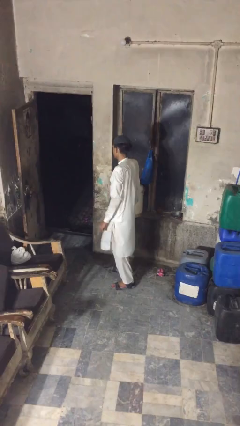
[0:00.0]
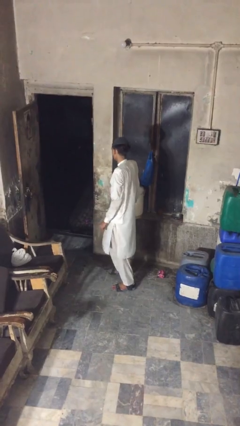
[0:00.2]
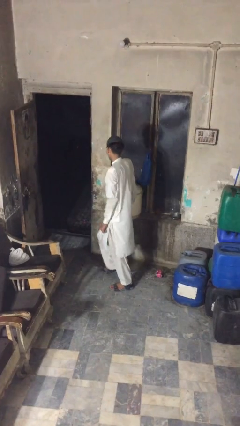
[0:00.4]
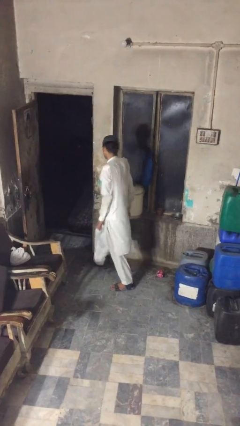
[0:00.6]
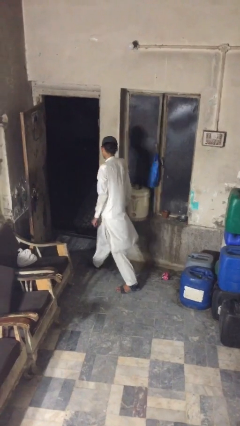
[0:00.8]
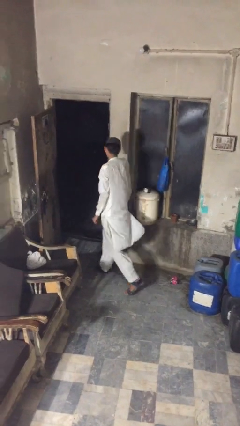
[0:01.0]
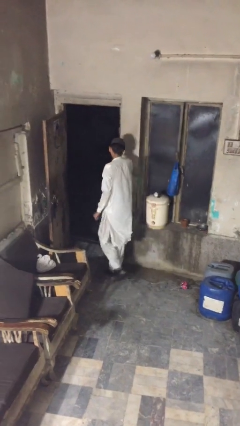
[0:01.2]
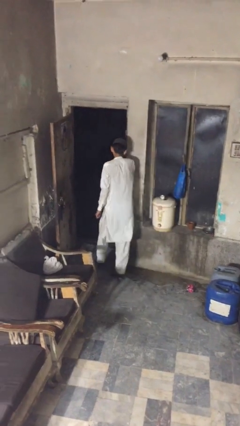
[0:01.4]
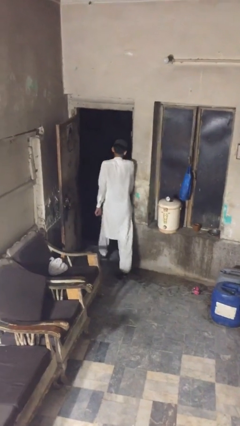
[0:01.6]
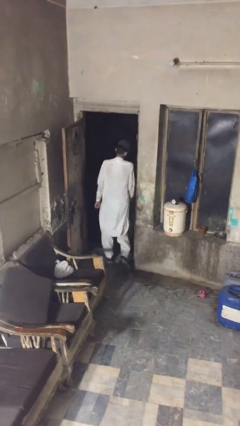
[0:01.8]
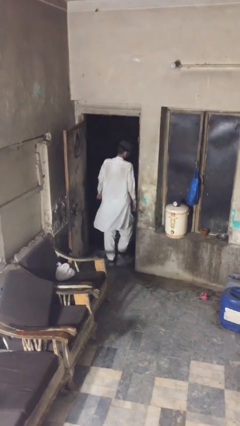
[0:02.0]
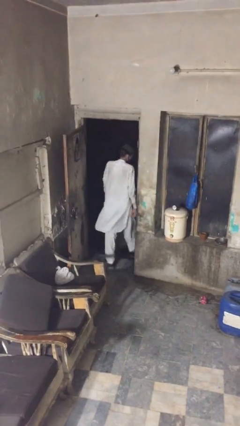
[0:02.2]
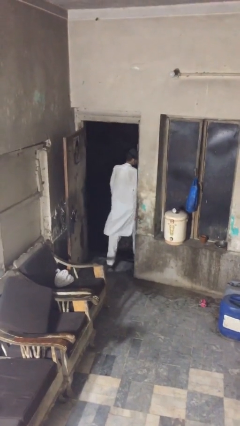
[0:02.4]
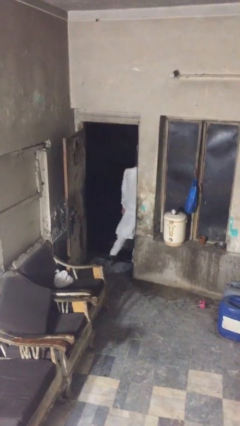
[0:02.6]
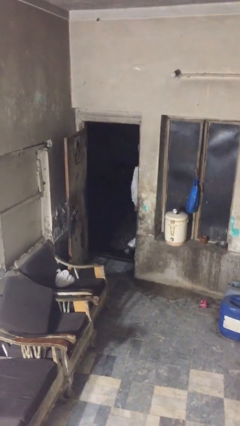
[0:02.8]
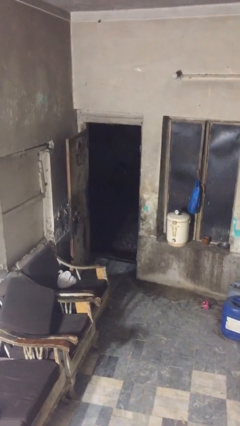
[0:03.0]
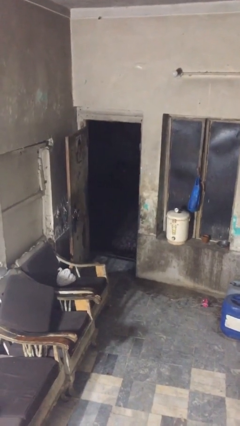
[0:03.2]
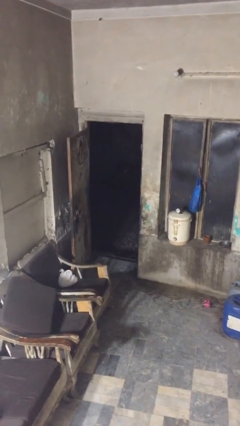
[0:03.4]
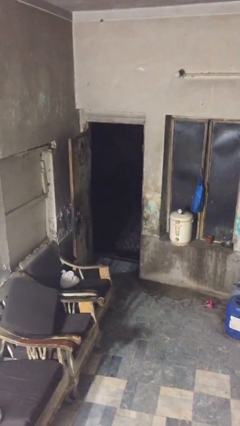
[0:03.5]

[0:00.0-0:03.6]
person exits scene through structure

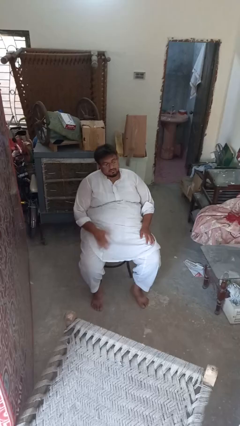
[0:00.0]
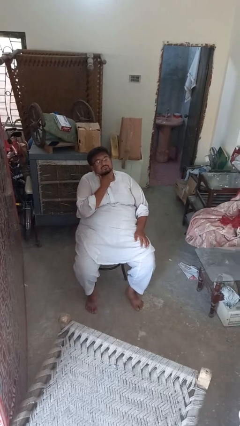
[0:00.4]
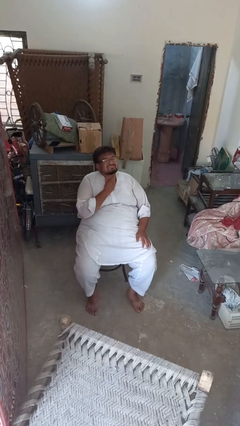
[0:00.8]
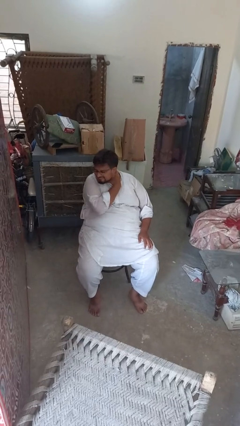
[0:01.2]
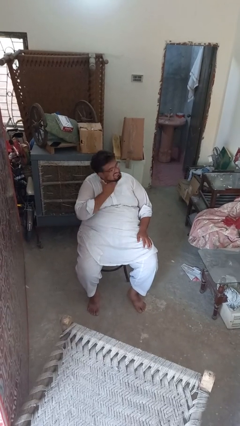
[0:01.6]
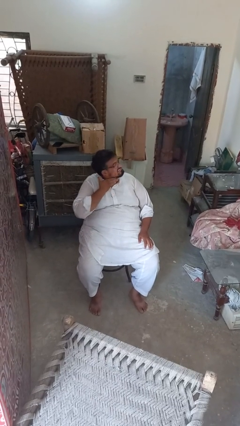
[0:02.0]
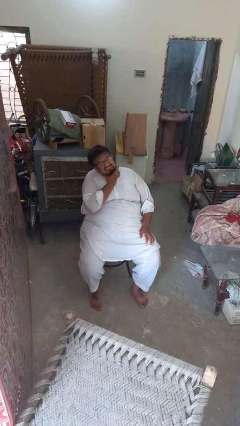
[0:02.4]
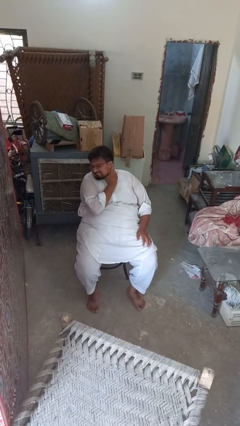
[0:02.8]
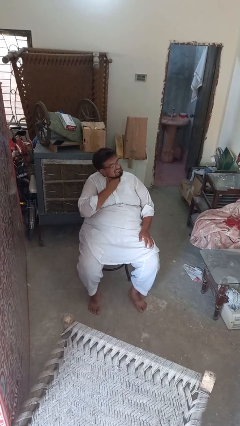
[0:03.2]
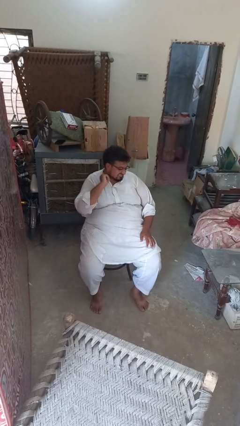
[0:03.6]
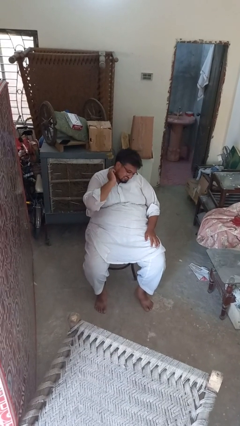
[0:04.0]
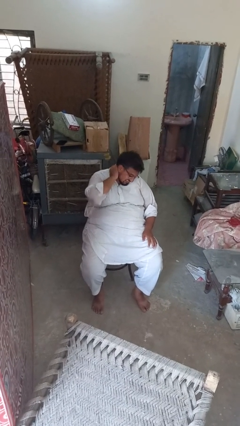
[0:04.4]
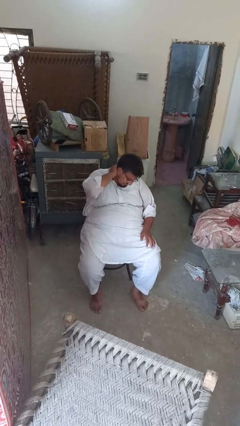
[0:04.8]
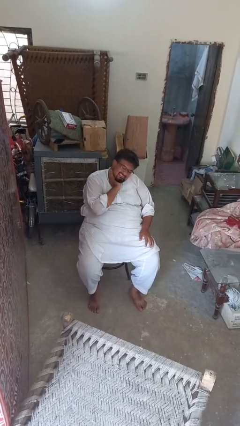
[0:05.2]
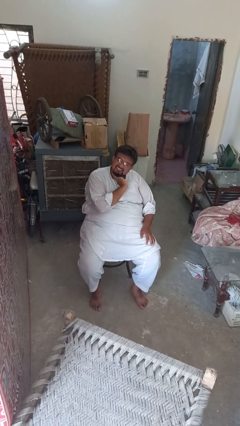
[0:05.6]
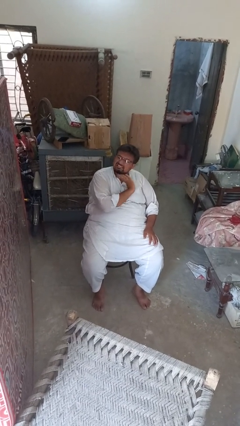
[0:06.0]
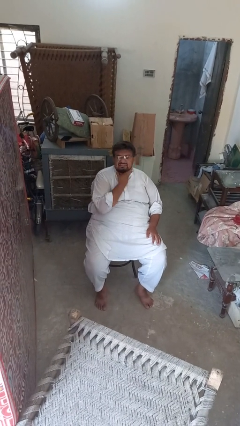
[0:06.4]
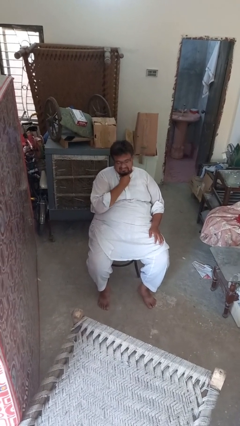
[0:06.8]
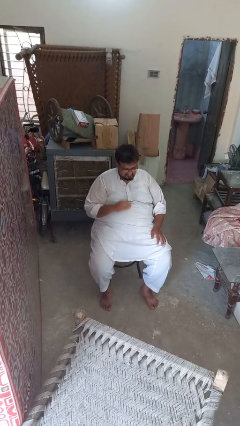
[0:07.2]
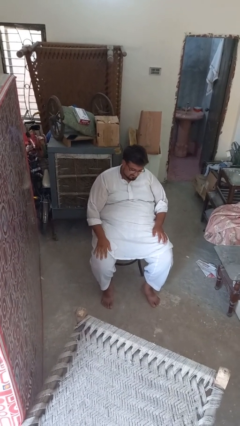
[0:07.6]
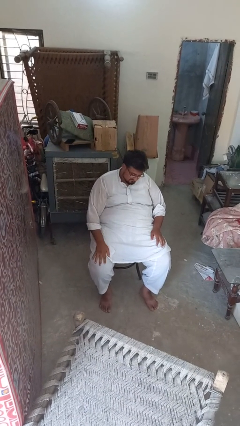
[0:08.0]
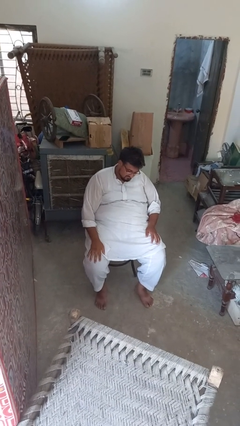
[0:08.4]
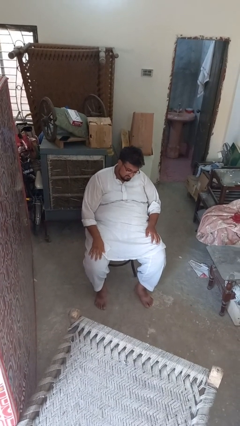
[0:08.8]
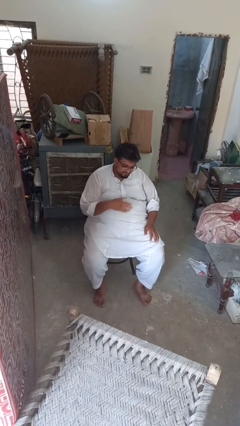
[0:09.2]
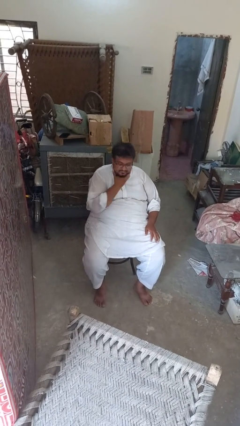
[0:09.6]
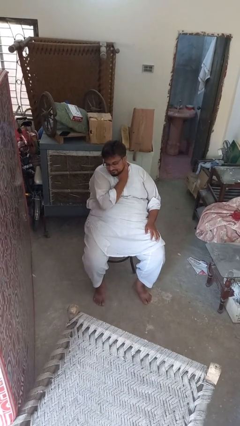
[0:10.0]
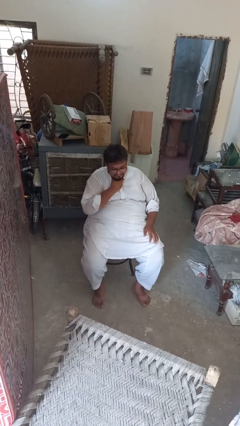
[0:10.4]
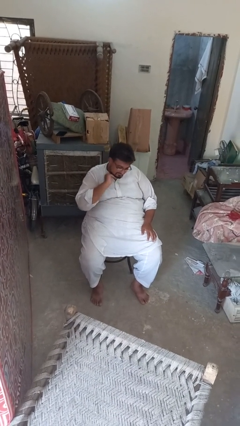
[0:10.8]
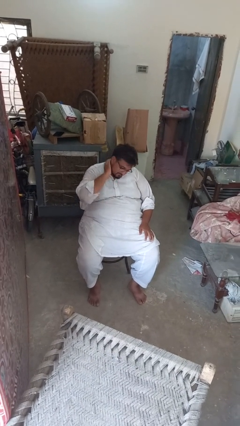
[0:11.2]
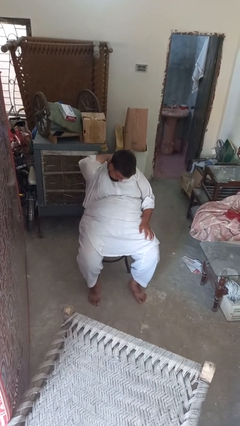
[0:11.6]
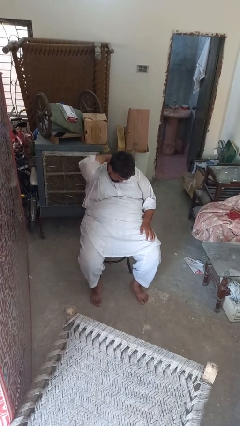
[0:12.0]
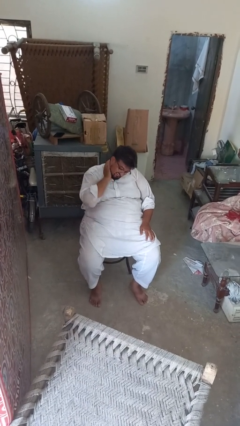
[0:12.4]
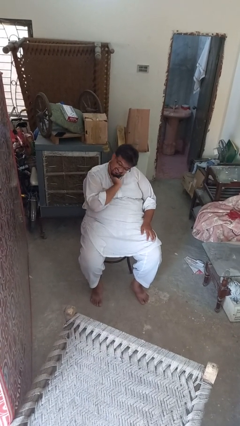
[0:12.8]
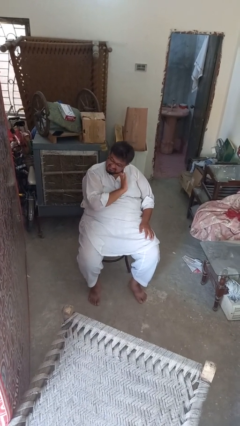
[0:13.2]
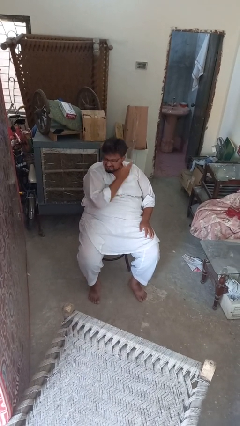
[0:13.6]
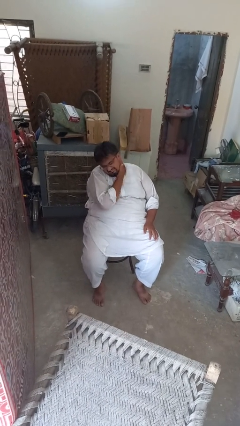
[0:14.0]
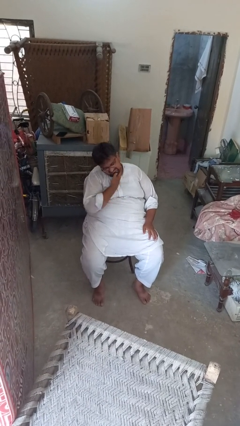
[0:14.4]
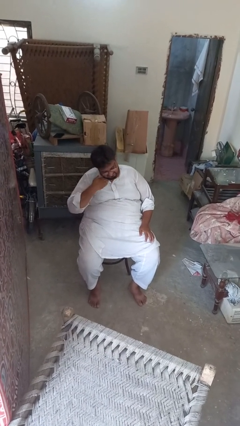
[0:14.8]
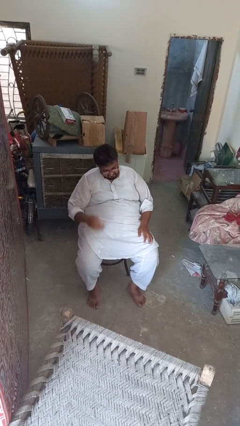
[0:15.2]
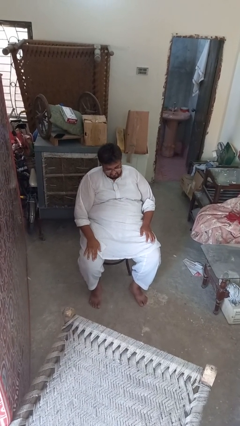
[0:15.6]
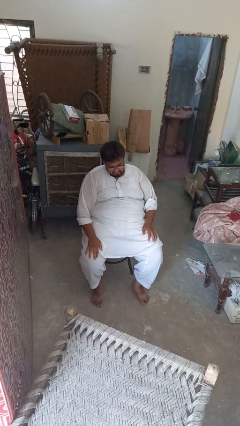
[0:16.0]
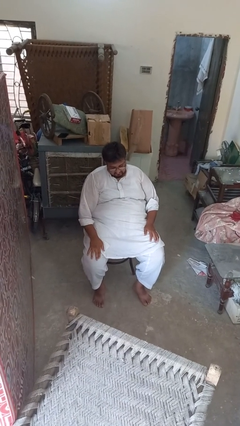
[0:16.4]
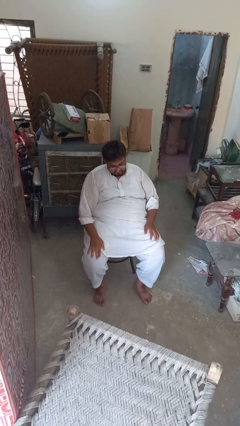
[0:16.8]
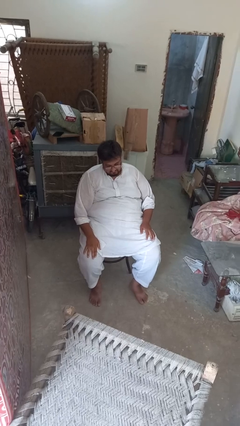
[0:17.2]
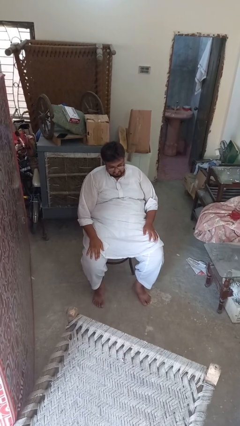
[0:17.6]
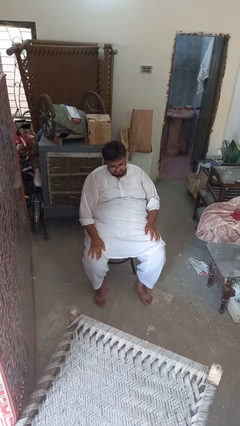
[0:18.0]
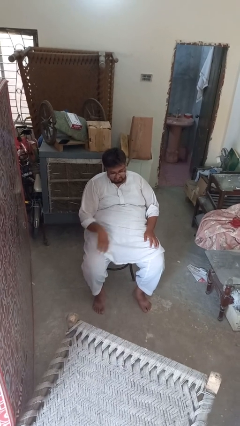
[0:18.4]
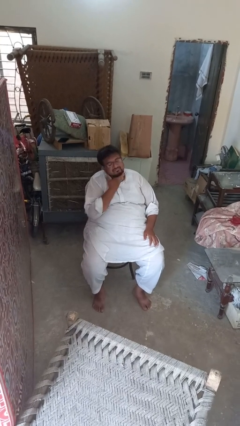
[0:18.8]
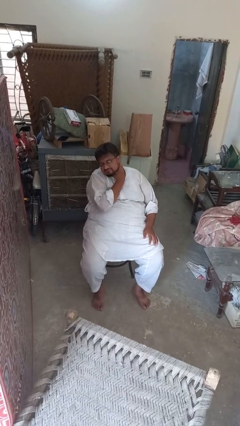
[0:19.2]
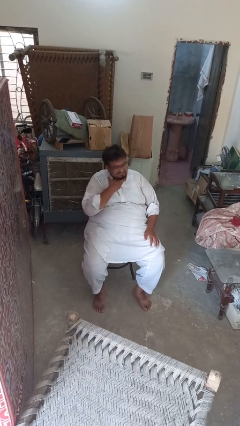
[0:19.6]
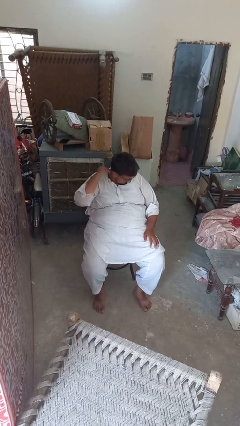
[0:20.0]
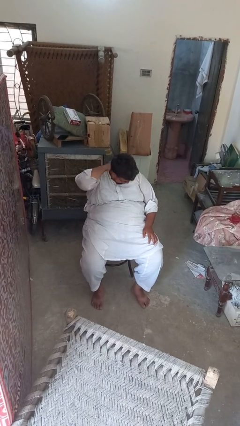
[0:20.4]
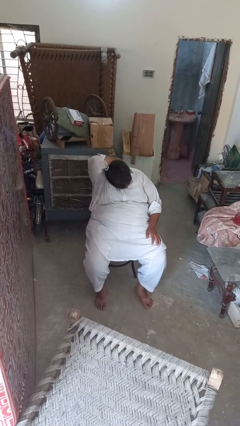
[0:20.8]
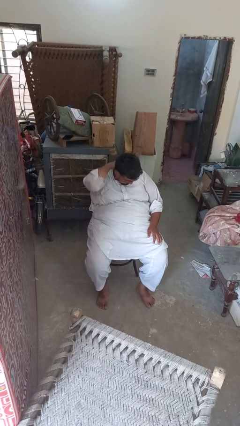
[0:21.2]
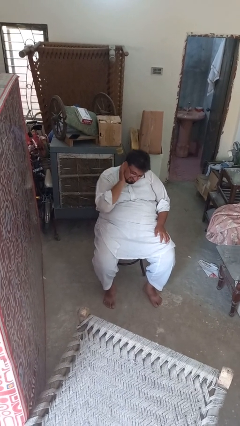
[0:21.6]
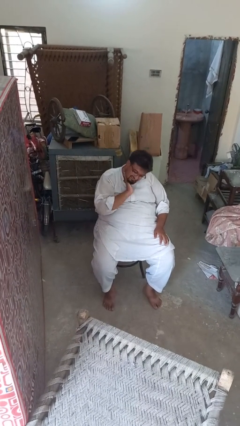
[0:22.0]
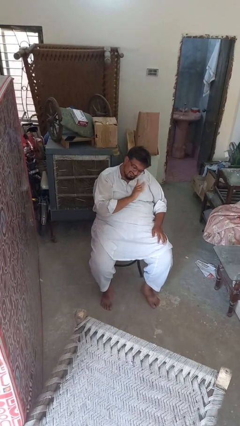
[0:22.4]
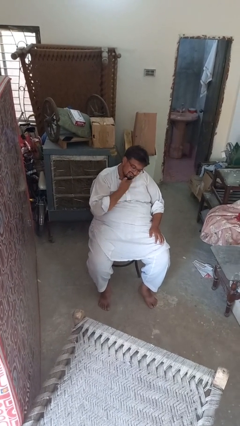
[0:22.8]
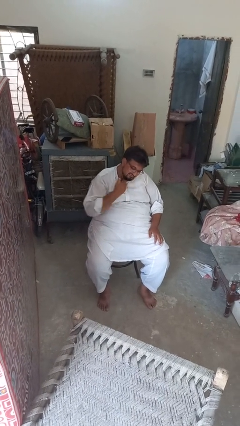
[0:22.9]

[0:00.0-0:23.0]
person rubs neck

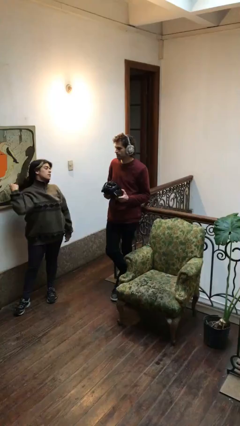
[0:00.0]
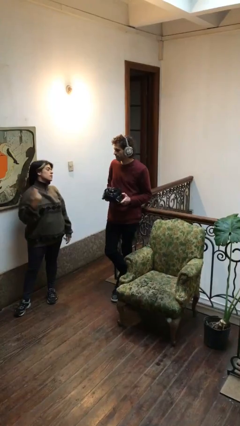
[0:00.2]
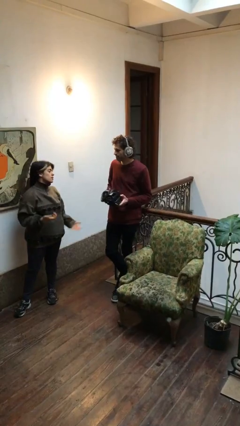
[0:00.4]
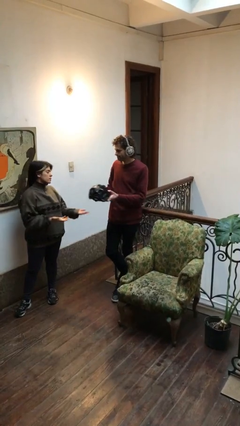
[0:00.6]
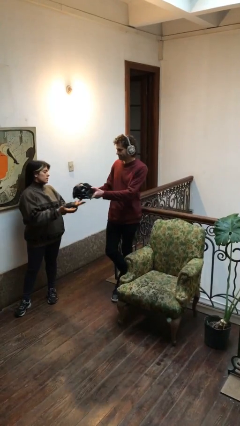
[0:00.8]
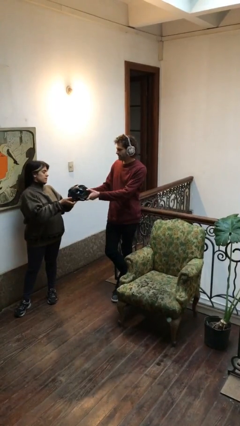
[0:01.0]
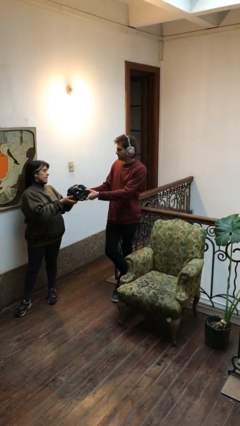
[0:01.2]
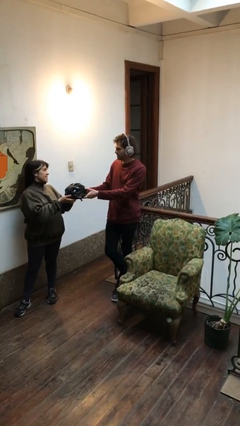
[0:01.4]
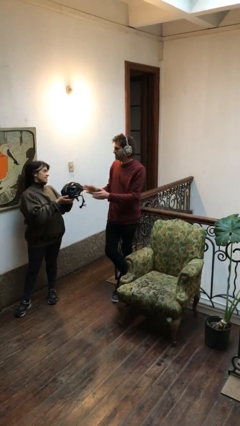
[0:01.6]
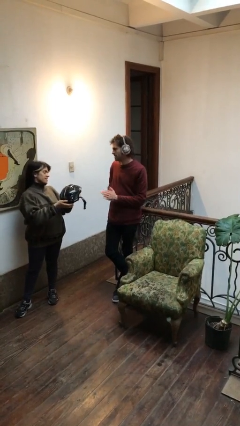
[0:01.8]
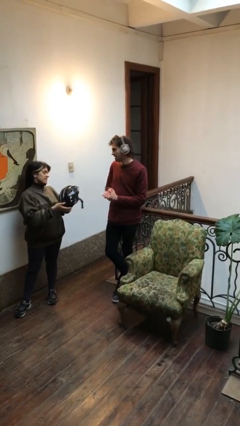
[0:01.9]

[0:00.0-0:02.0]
person transfers object to person

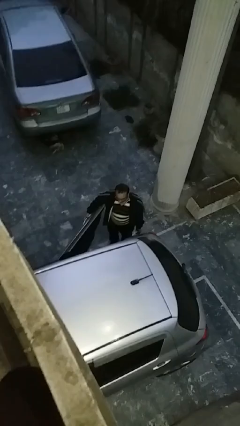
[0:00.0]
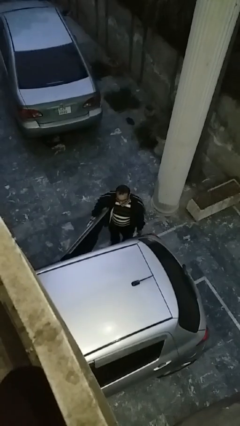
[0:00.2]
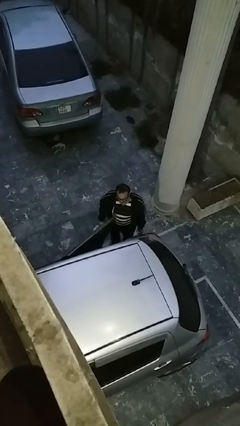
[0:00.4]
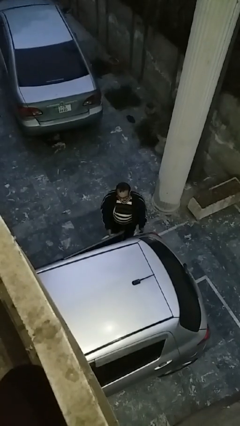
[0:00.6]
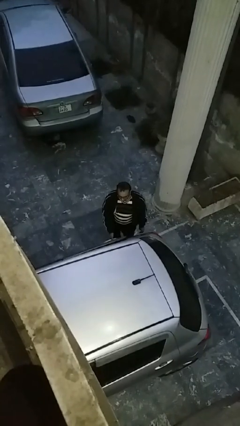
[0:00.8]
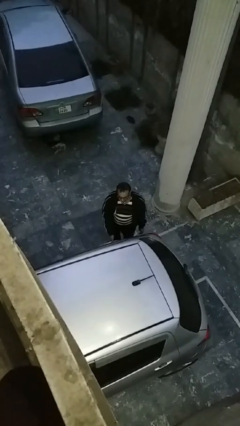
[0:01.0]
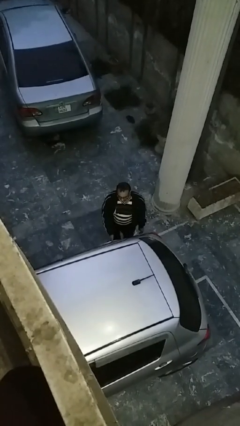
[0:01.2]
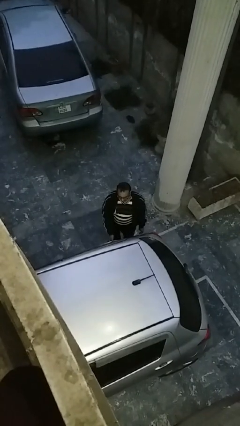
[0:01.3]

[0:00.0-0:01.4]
person closes car door
